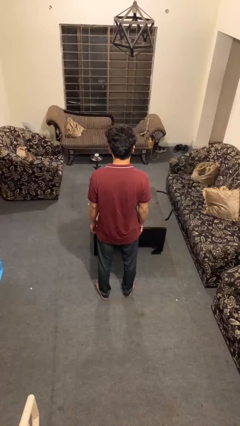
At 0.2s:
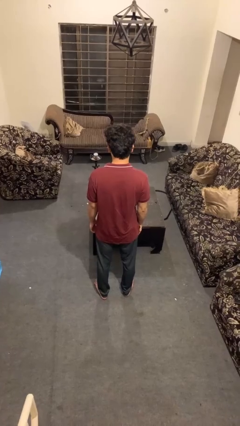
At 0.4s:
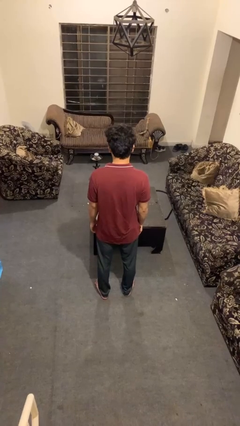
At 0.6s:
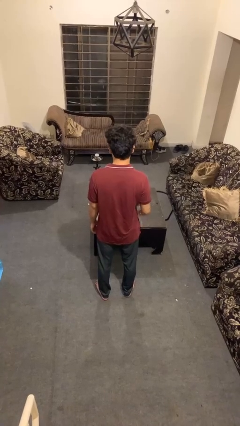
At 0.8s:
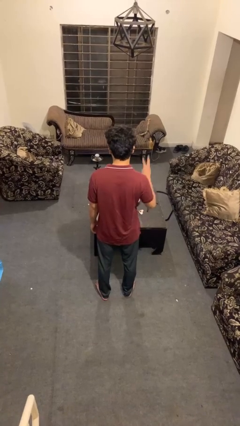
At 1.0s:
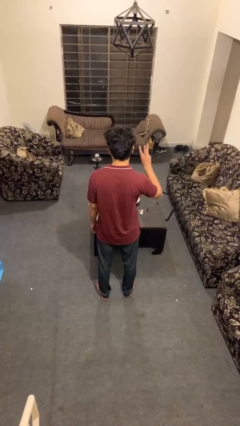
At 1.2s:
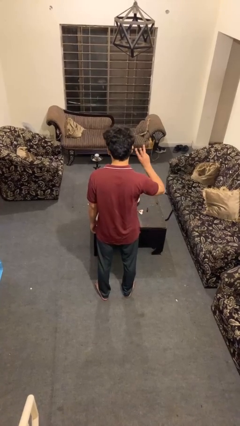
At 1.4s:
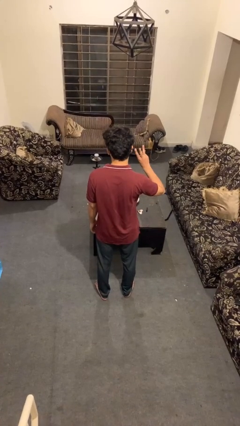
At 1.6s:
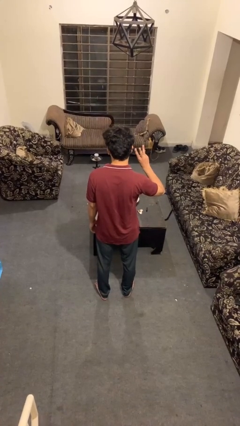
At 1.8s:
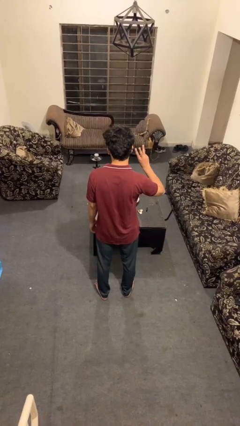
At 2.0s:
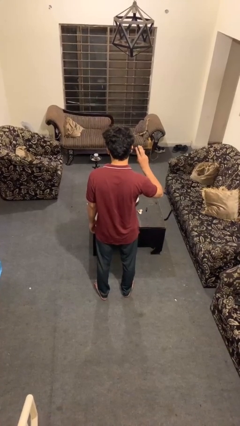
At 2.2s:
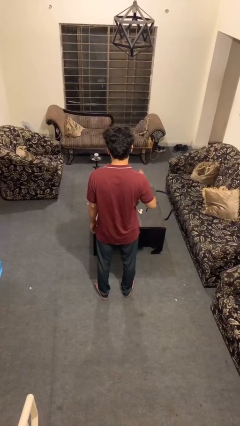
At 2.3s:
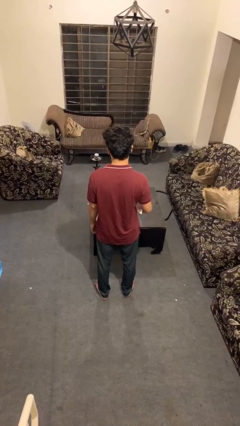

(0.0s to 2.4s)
person gestures number three

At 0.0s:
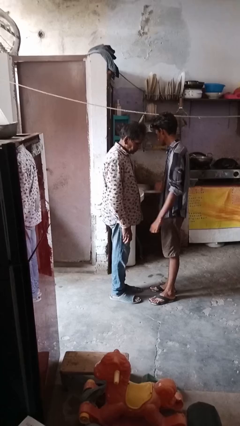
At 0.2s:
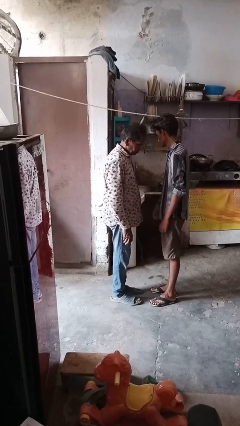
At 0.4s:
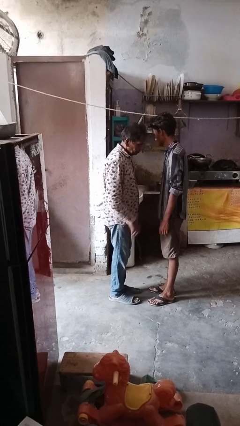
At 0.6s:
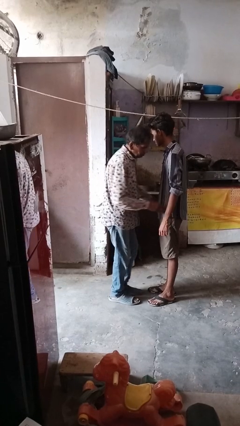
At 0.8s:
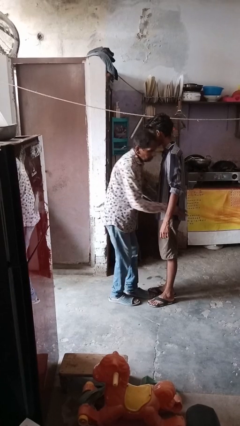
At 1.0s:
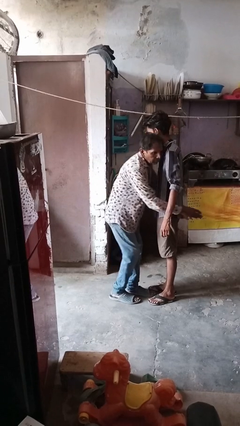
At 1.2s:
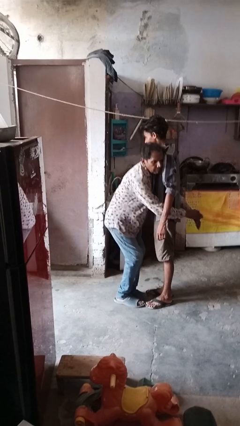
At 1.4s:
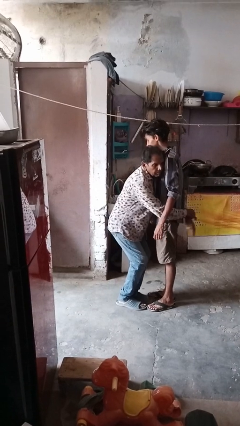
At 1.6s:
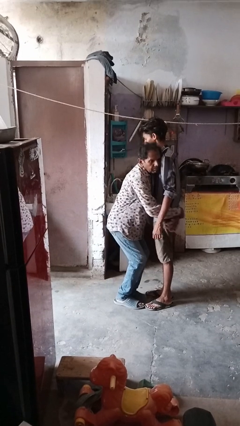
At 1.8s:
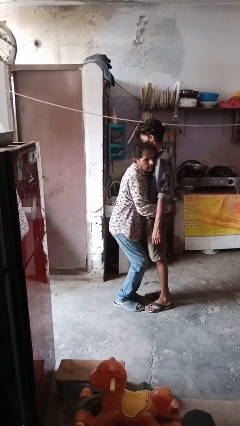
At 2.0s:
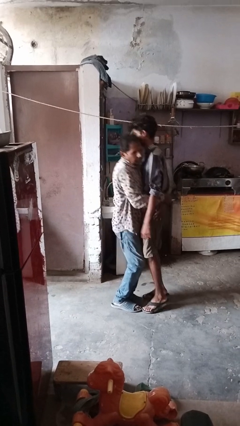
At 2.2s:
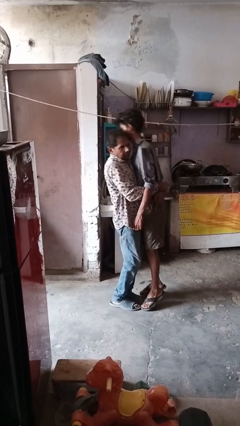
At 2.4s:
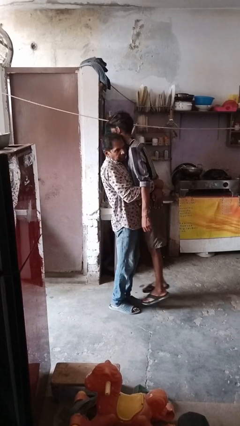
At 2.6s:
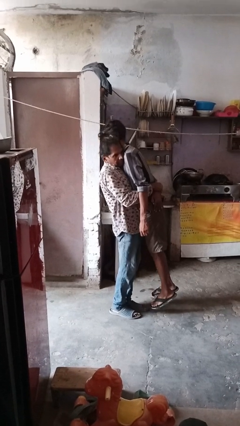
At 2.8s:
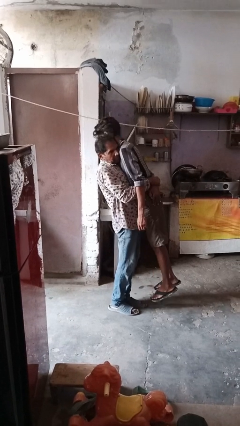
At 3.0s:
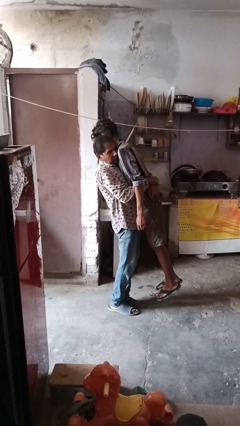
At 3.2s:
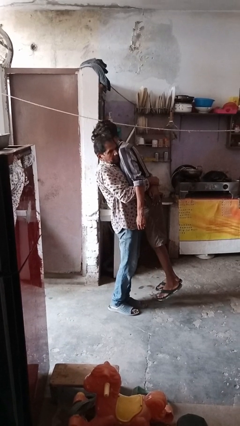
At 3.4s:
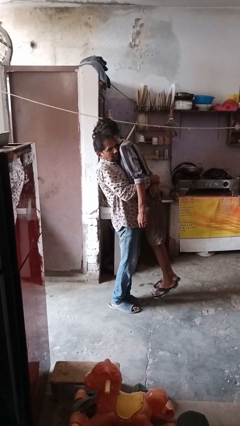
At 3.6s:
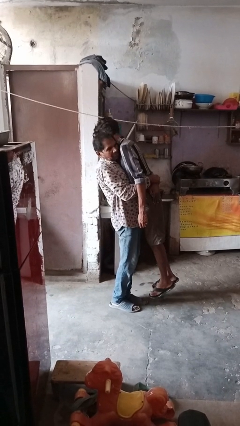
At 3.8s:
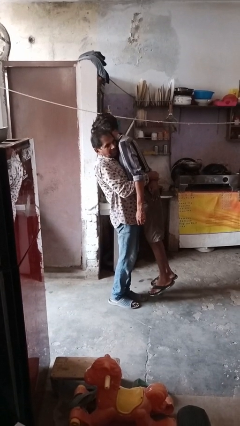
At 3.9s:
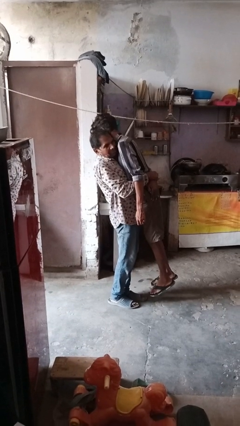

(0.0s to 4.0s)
person picks up person

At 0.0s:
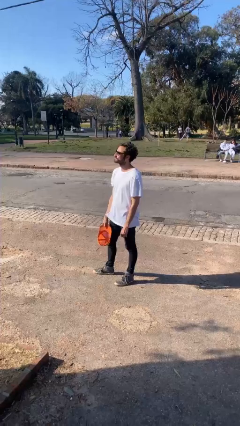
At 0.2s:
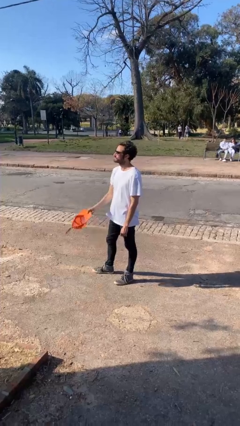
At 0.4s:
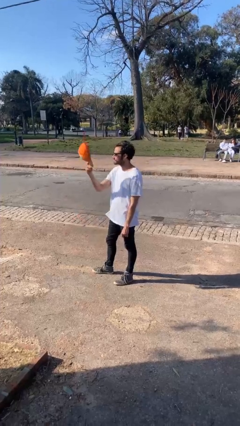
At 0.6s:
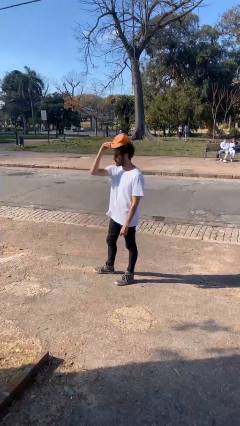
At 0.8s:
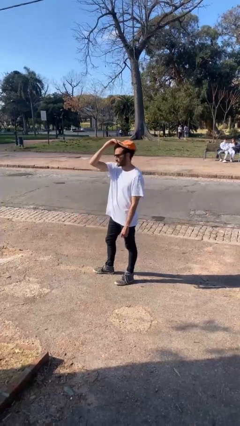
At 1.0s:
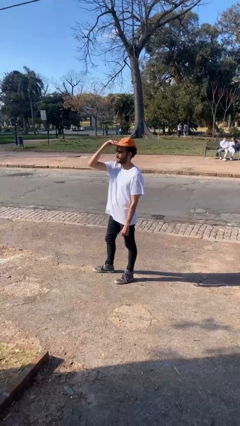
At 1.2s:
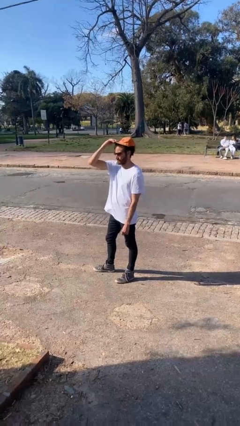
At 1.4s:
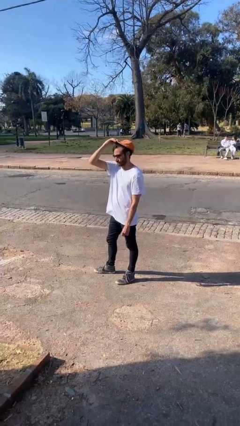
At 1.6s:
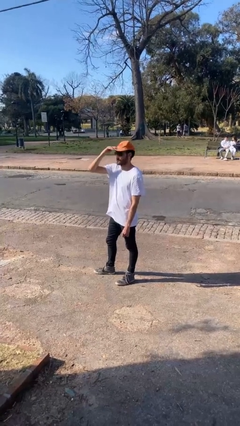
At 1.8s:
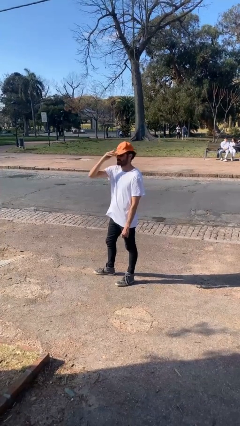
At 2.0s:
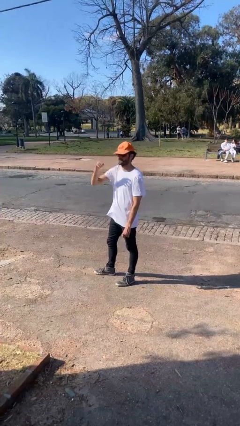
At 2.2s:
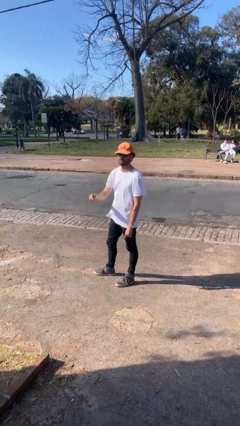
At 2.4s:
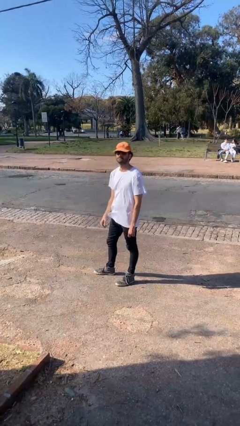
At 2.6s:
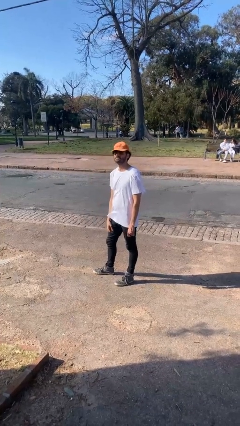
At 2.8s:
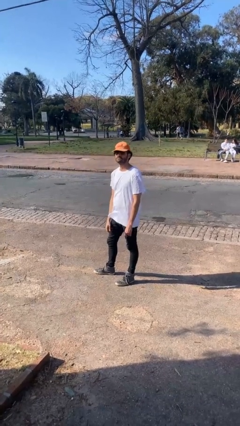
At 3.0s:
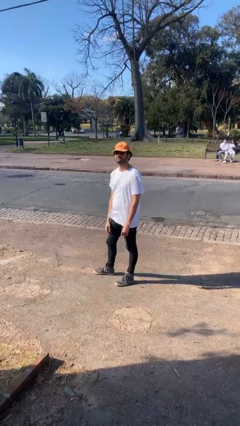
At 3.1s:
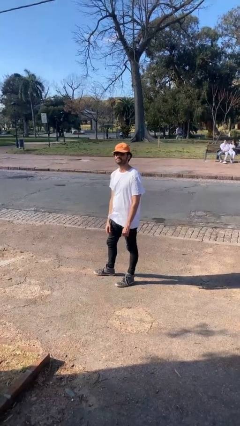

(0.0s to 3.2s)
person puts on hat

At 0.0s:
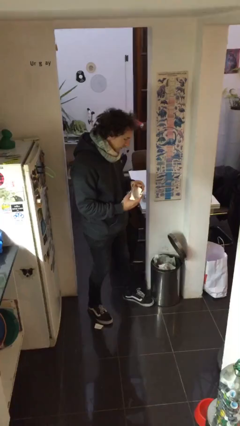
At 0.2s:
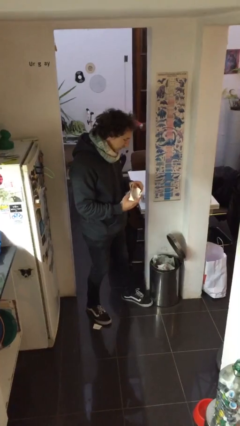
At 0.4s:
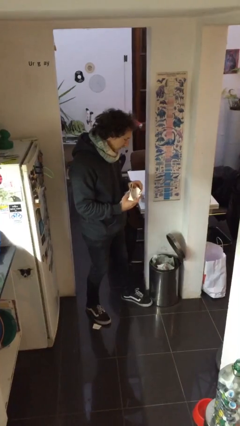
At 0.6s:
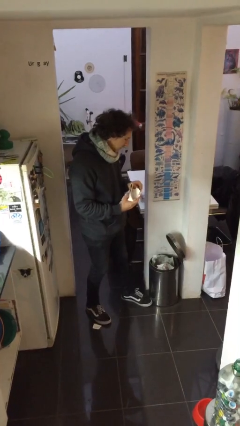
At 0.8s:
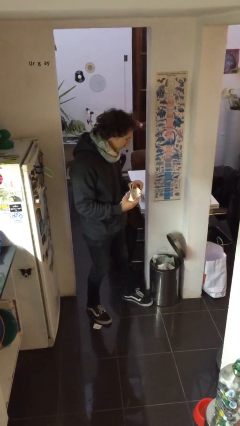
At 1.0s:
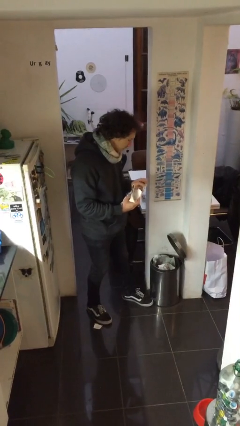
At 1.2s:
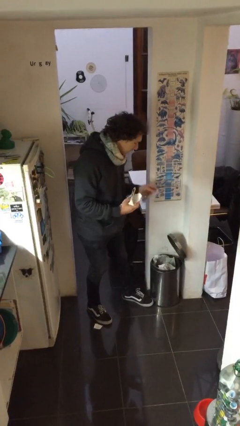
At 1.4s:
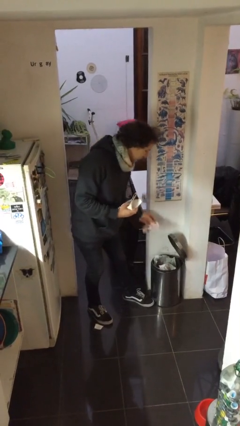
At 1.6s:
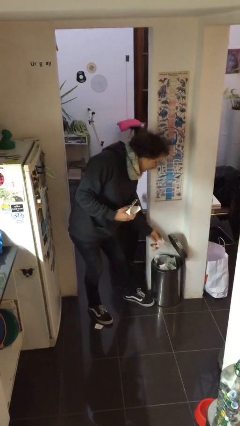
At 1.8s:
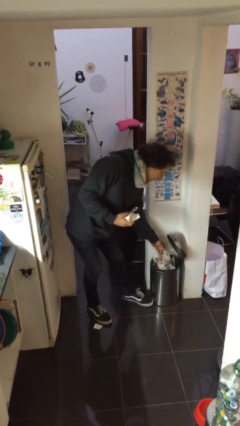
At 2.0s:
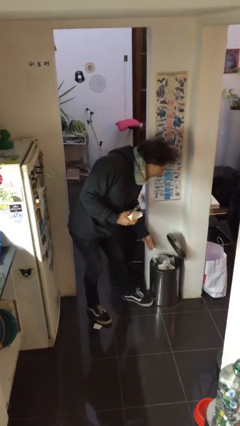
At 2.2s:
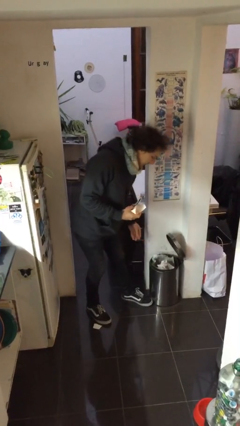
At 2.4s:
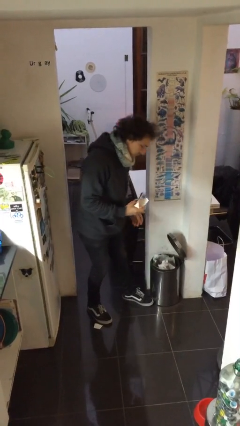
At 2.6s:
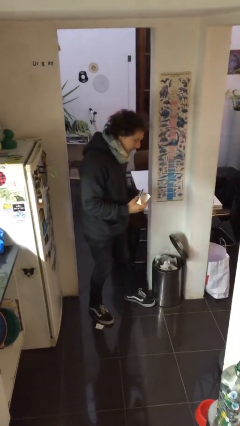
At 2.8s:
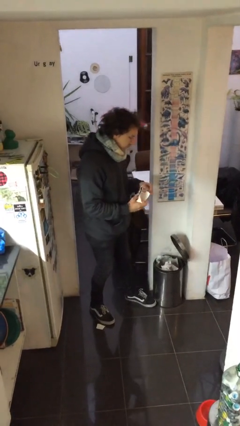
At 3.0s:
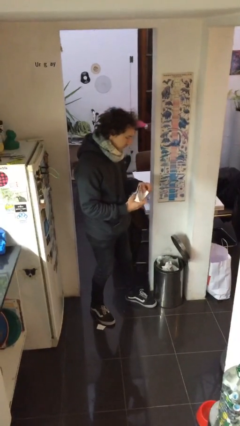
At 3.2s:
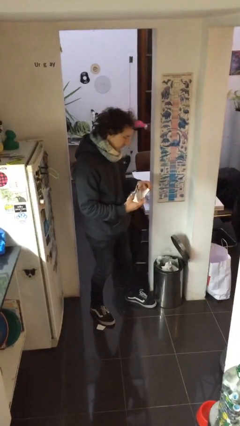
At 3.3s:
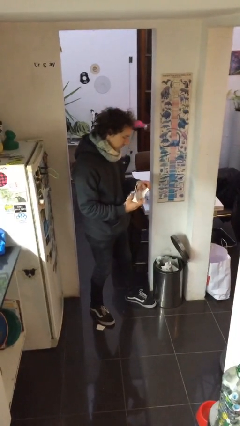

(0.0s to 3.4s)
person discards trash

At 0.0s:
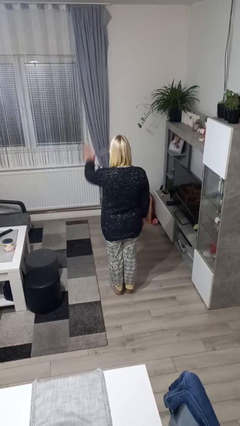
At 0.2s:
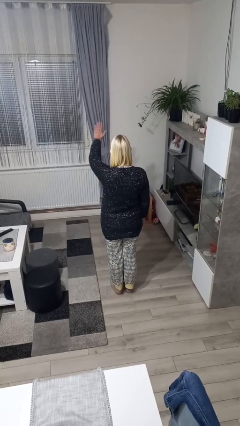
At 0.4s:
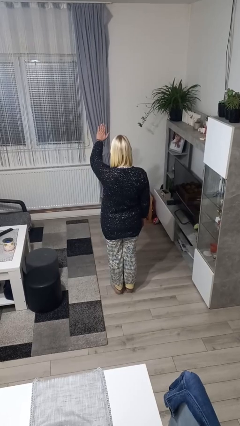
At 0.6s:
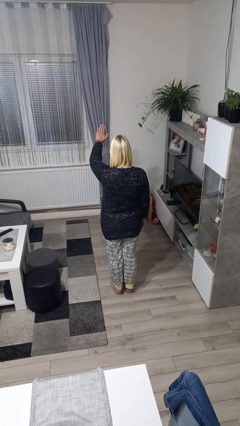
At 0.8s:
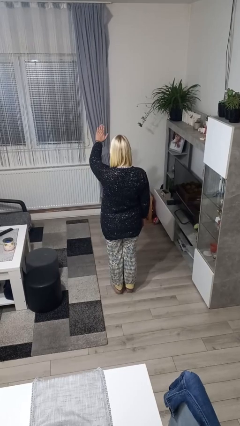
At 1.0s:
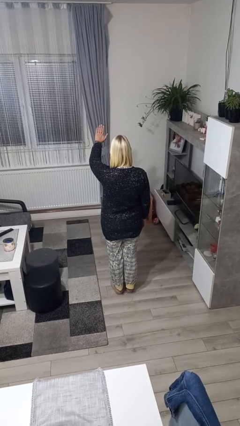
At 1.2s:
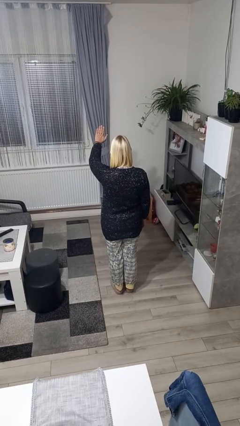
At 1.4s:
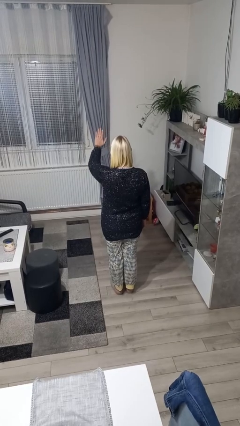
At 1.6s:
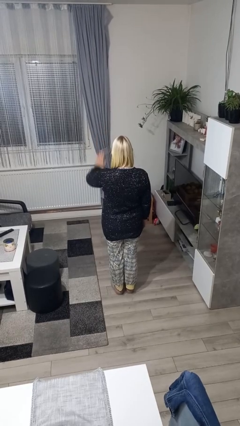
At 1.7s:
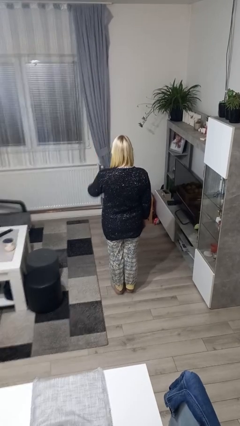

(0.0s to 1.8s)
person gestures stop

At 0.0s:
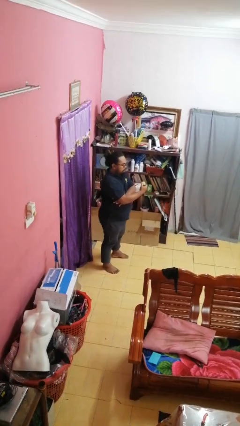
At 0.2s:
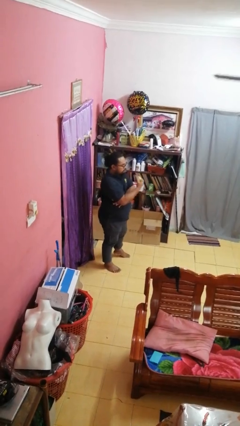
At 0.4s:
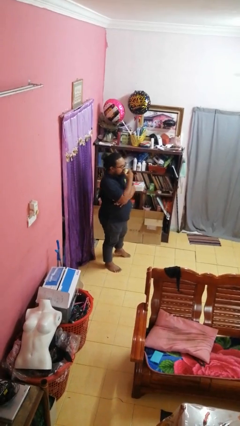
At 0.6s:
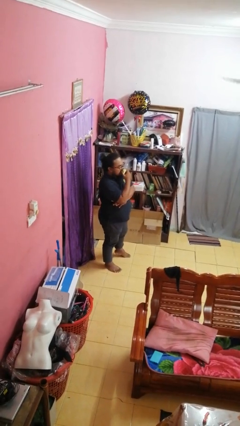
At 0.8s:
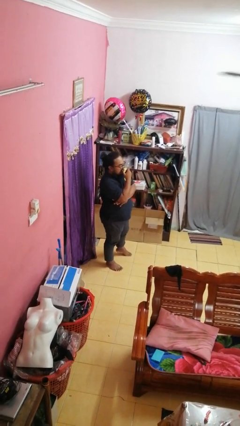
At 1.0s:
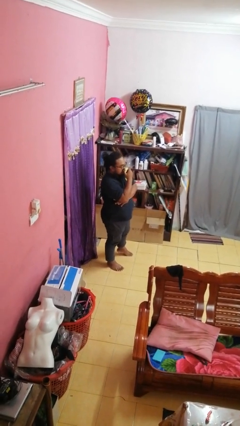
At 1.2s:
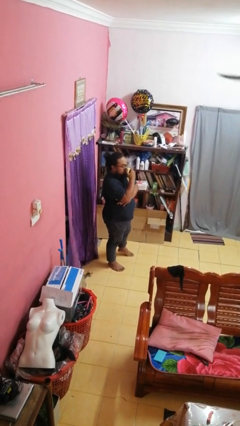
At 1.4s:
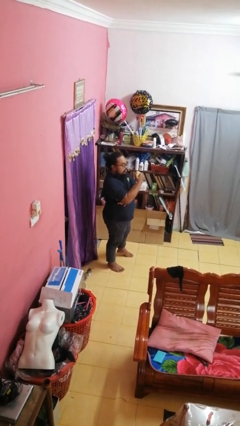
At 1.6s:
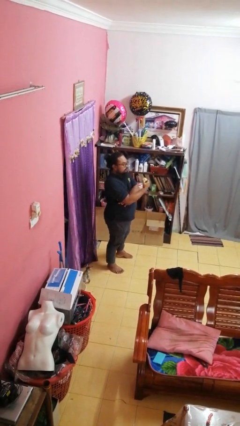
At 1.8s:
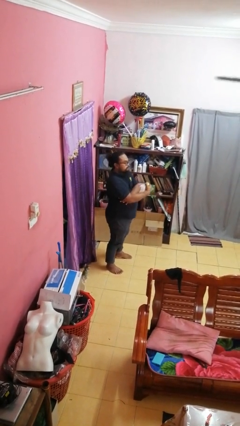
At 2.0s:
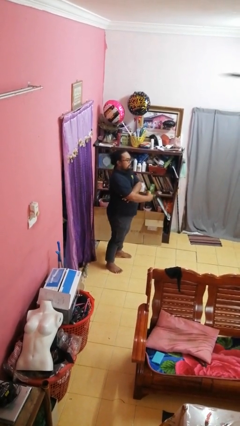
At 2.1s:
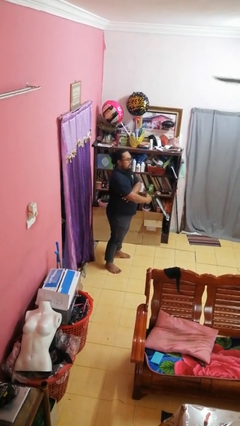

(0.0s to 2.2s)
person eats apple
